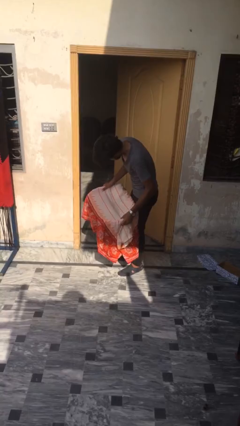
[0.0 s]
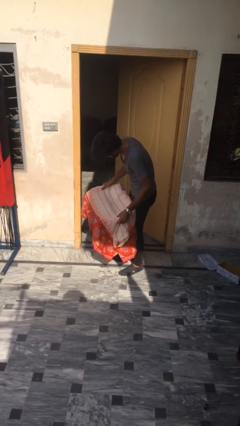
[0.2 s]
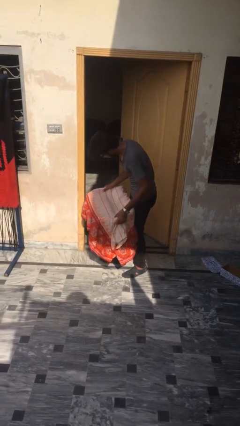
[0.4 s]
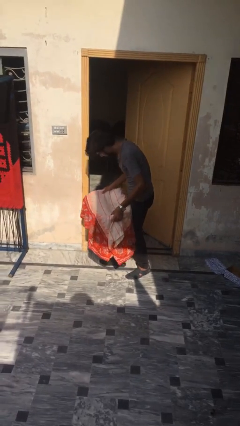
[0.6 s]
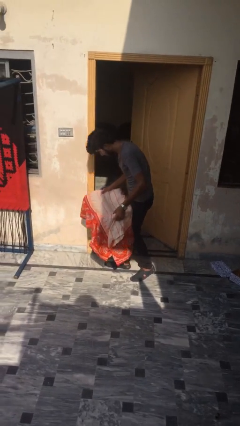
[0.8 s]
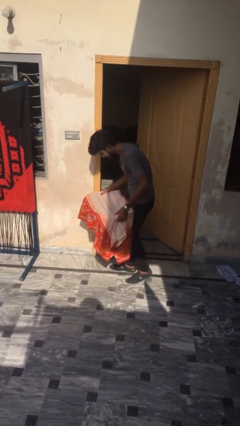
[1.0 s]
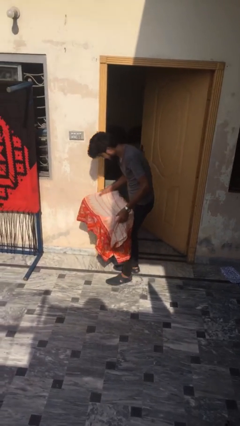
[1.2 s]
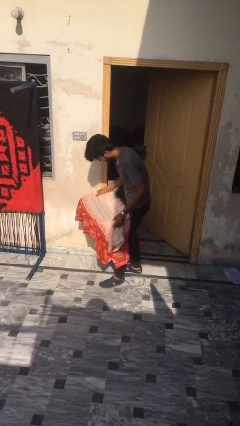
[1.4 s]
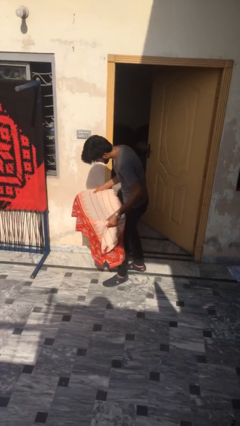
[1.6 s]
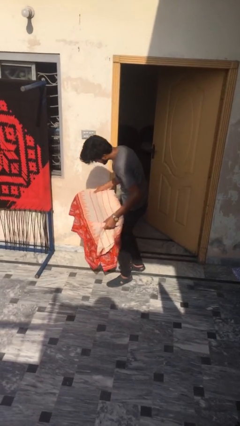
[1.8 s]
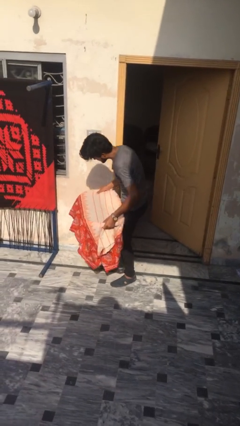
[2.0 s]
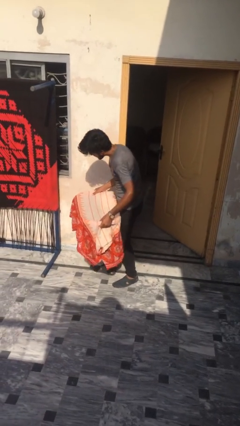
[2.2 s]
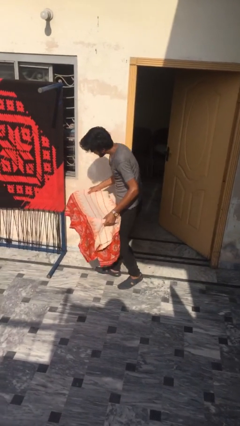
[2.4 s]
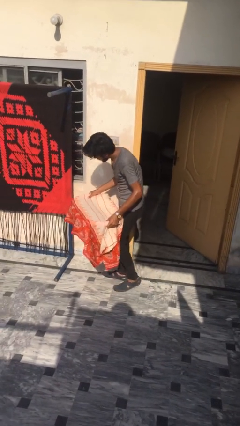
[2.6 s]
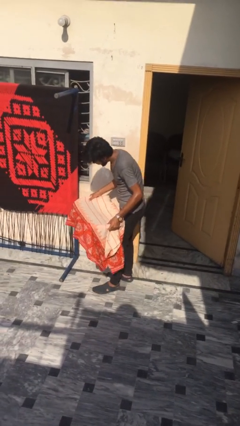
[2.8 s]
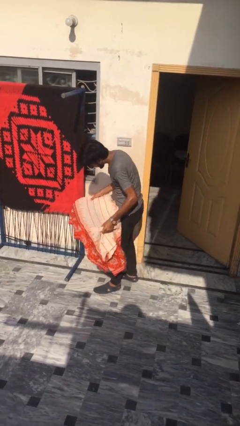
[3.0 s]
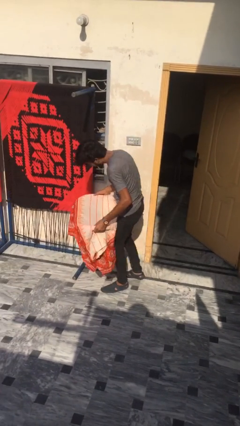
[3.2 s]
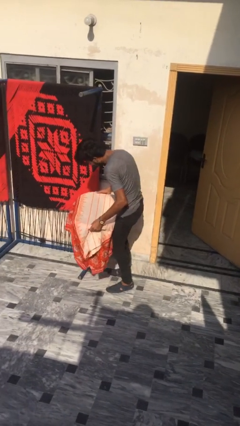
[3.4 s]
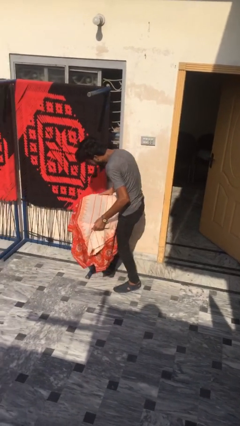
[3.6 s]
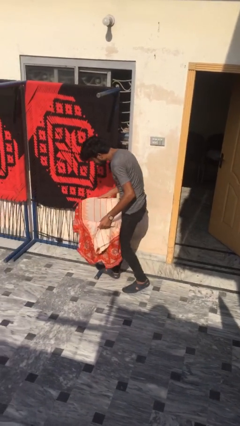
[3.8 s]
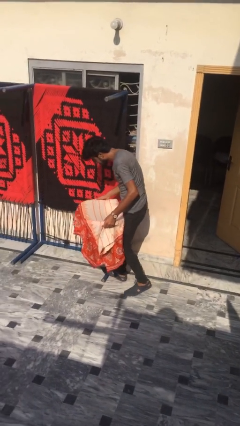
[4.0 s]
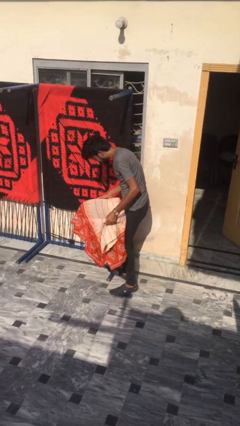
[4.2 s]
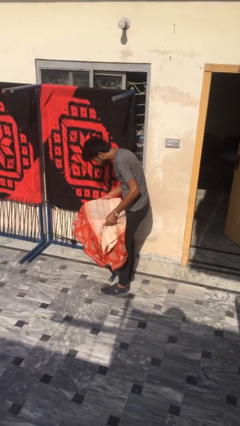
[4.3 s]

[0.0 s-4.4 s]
person carries heavy object

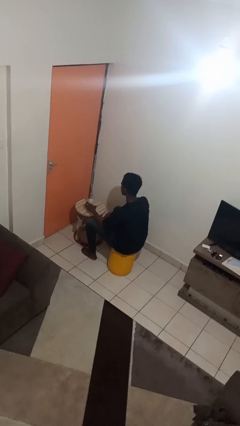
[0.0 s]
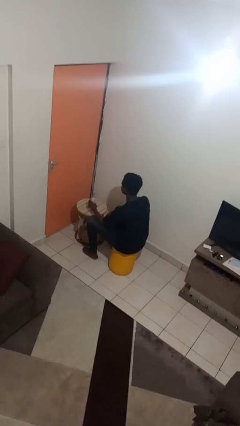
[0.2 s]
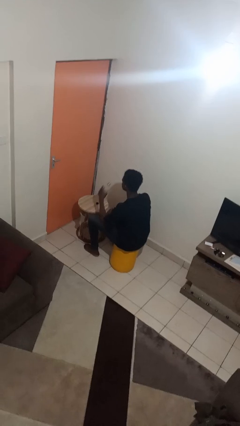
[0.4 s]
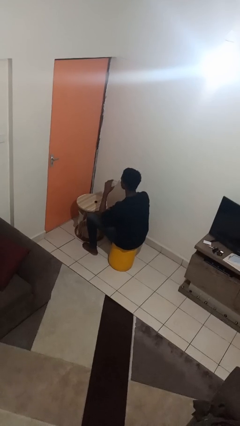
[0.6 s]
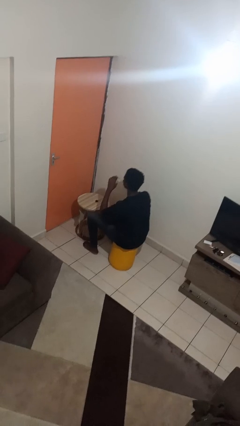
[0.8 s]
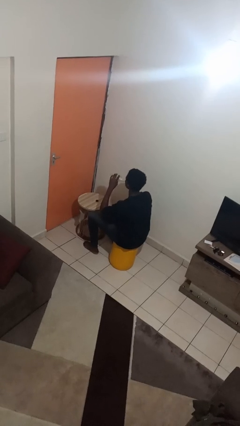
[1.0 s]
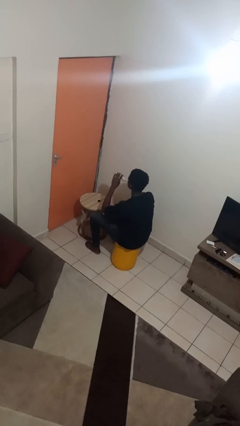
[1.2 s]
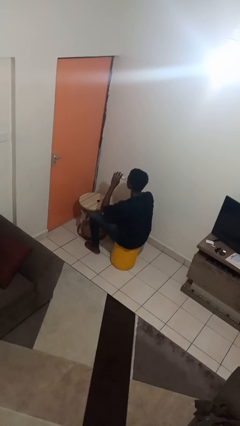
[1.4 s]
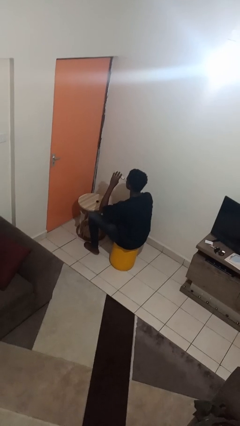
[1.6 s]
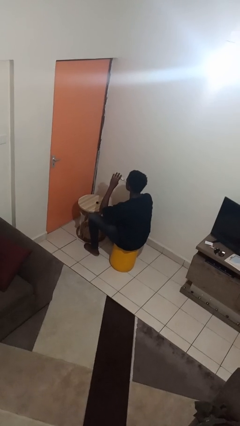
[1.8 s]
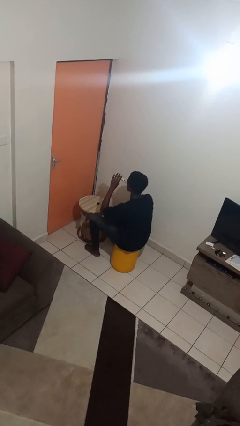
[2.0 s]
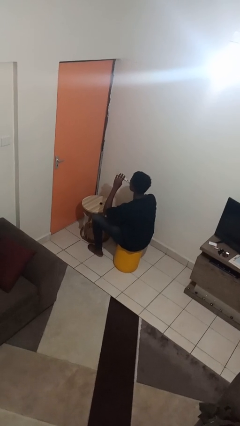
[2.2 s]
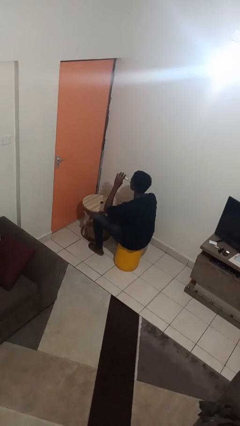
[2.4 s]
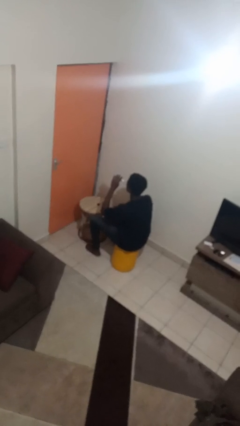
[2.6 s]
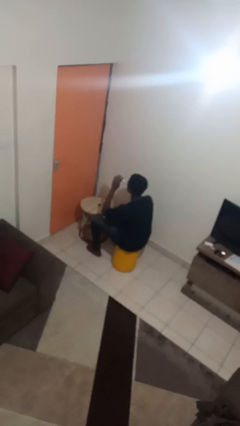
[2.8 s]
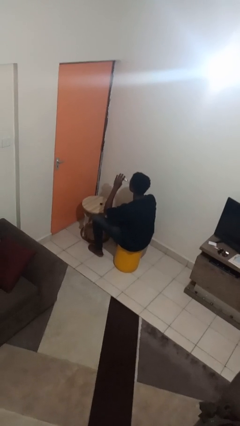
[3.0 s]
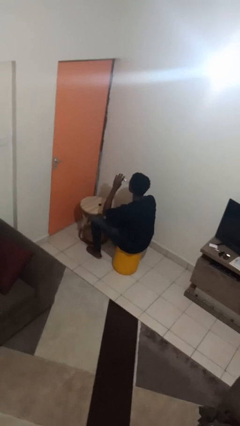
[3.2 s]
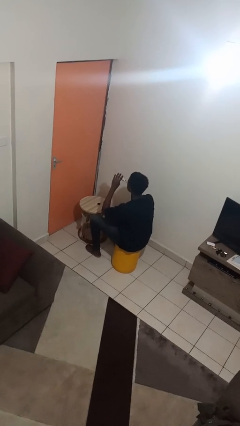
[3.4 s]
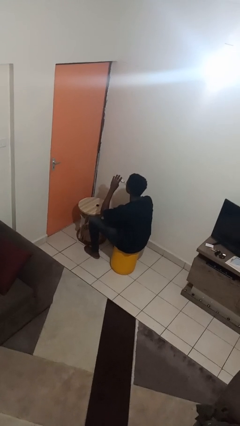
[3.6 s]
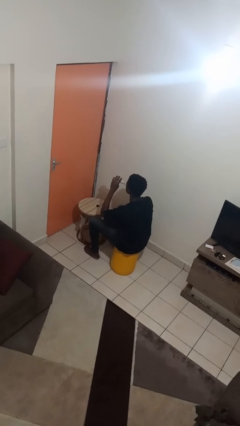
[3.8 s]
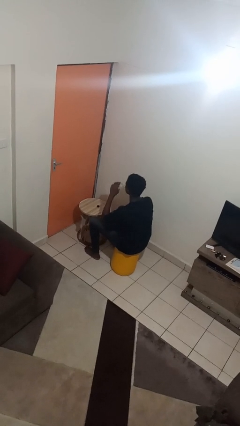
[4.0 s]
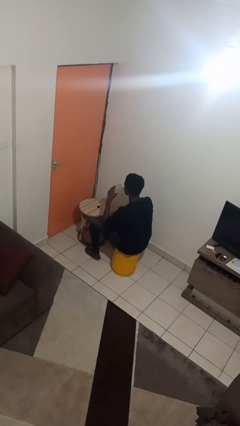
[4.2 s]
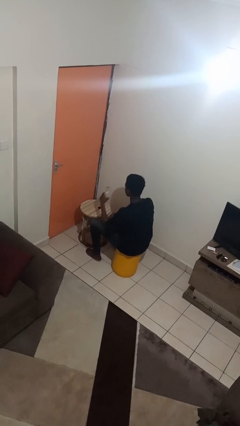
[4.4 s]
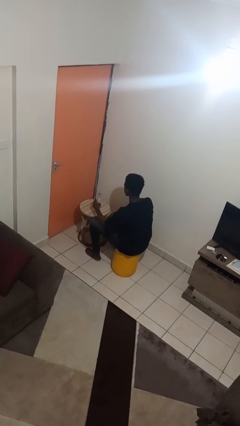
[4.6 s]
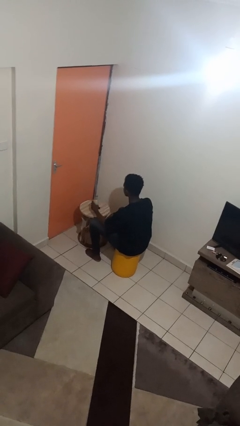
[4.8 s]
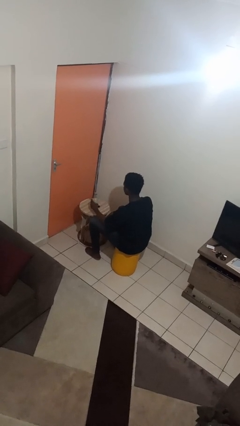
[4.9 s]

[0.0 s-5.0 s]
person drinks from bottle

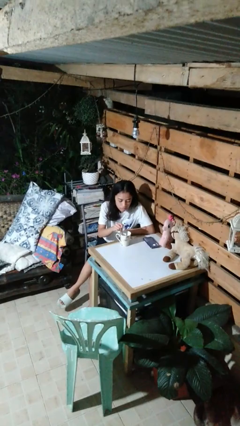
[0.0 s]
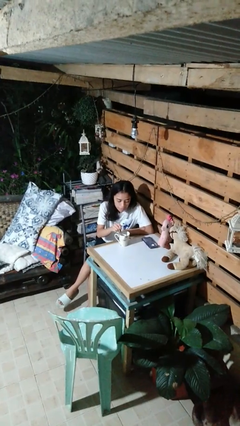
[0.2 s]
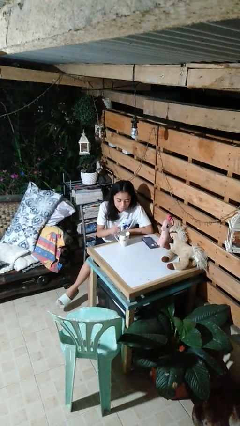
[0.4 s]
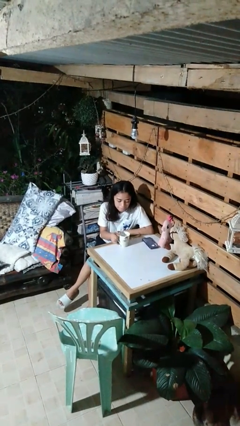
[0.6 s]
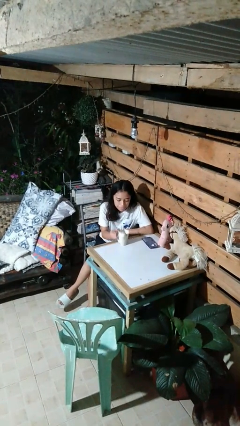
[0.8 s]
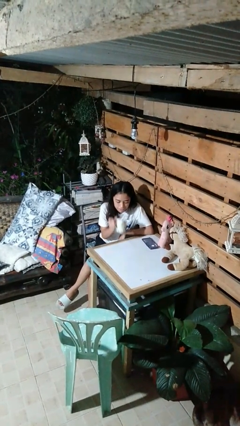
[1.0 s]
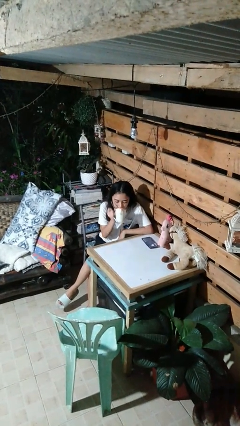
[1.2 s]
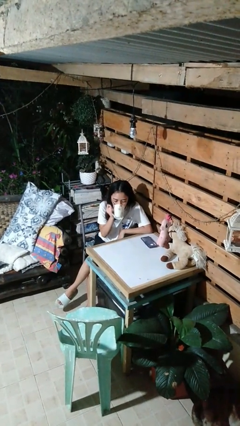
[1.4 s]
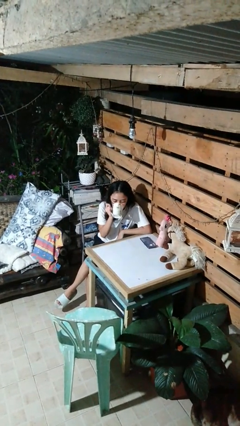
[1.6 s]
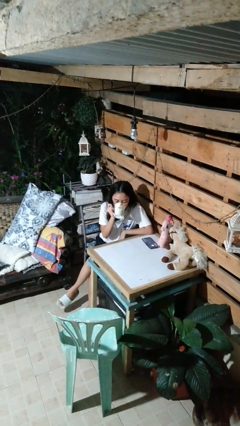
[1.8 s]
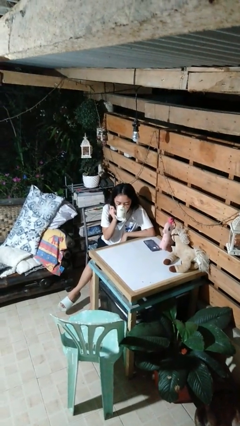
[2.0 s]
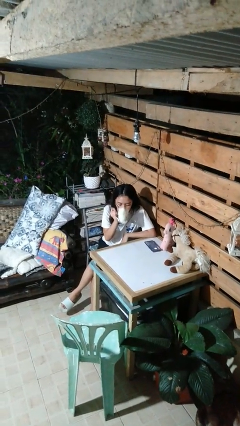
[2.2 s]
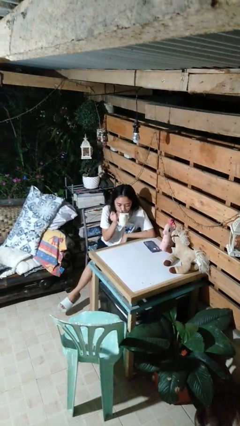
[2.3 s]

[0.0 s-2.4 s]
person drinks from mug

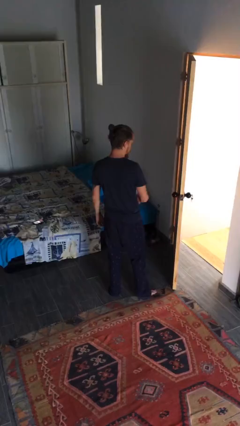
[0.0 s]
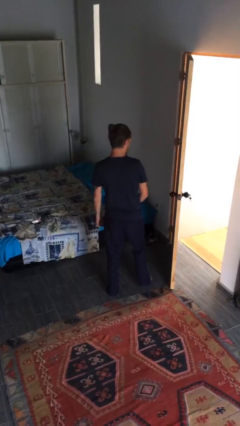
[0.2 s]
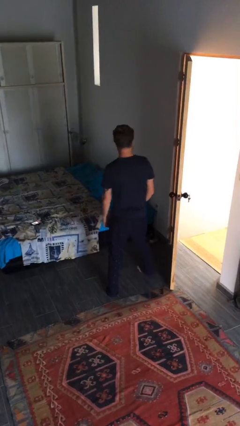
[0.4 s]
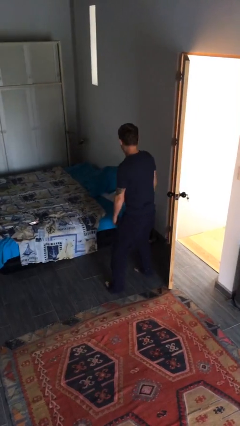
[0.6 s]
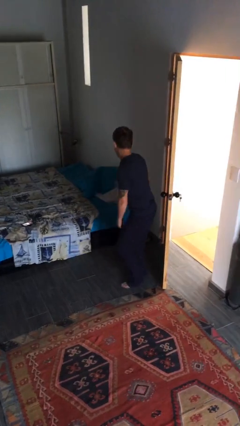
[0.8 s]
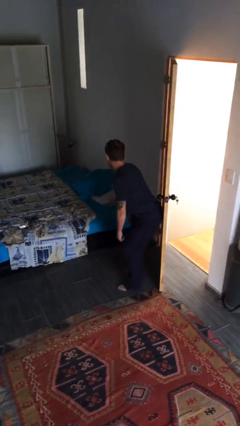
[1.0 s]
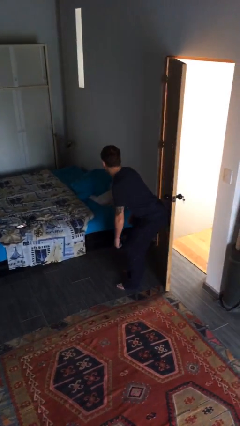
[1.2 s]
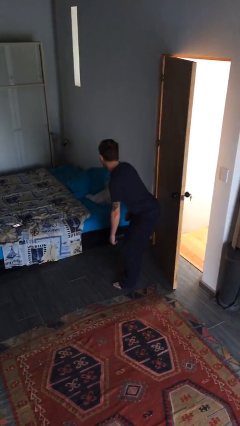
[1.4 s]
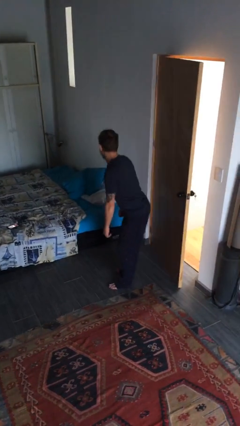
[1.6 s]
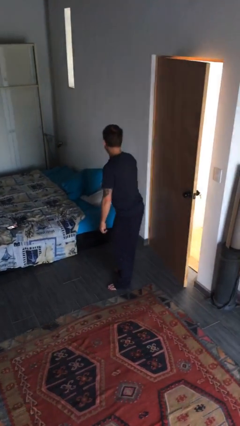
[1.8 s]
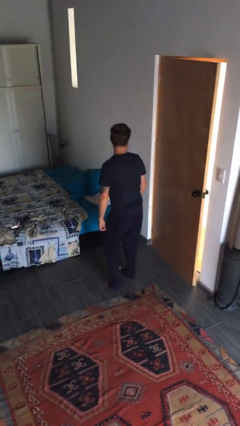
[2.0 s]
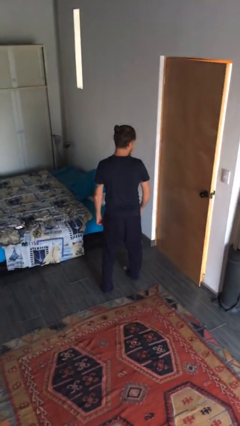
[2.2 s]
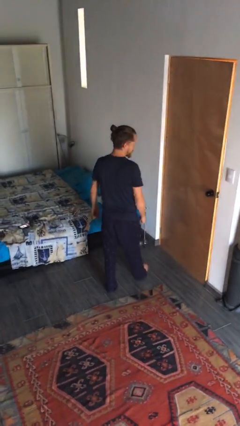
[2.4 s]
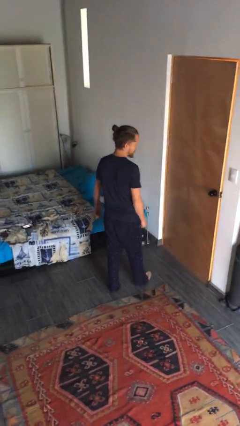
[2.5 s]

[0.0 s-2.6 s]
person closes door with hip

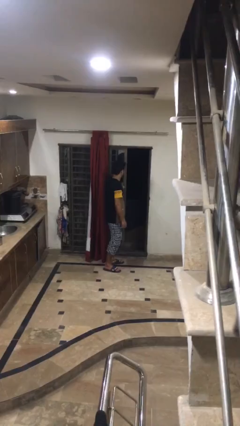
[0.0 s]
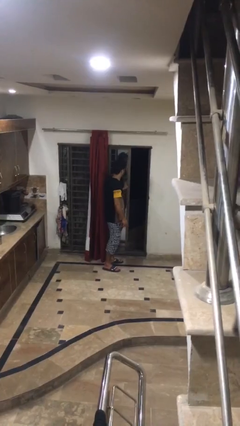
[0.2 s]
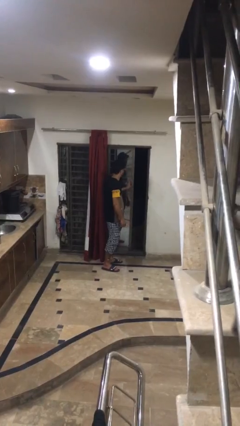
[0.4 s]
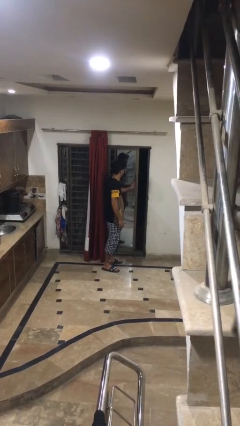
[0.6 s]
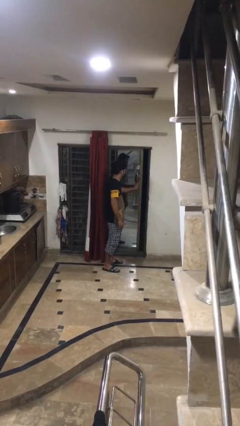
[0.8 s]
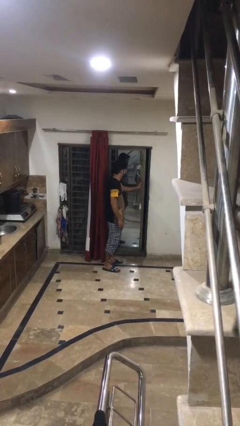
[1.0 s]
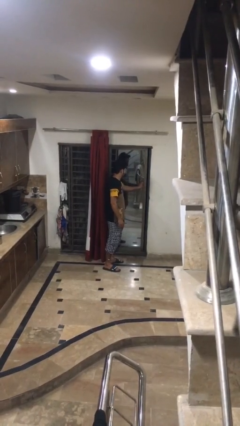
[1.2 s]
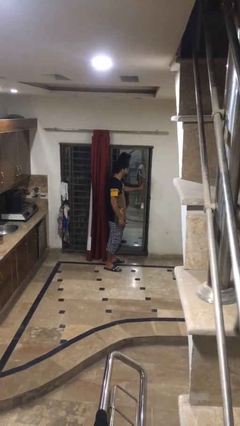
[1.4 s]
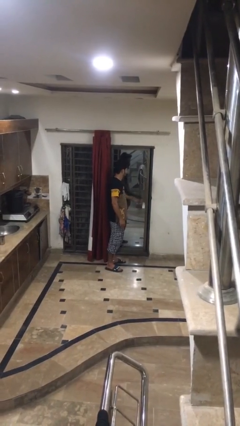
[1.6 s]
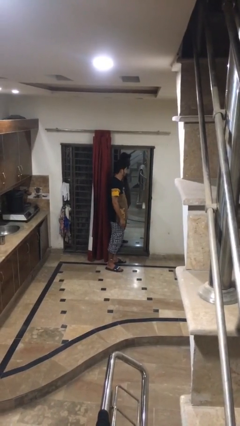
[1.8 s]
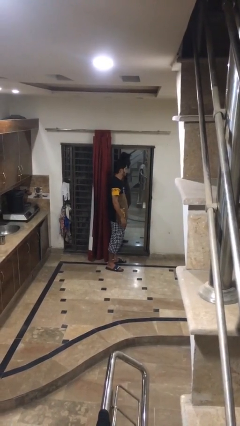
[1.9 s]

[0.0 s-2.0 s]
person closes home window

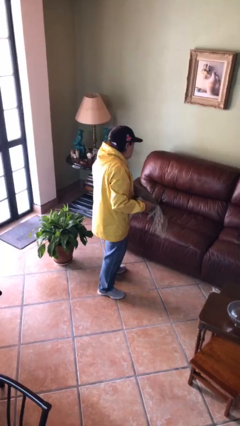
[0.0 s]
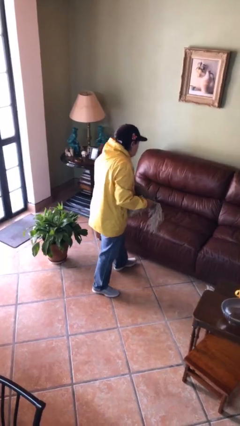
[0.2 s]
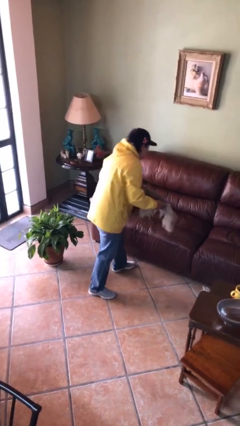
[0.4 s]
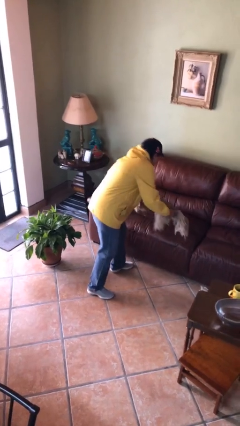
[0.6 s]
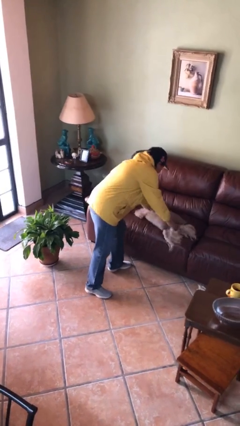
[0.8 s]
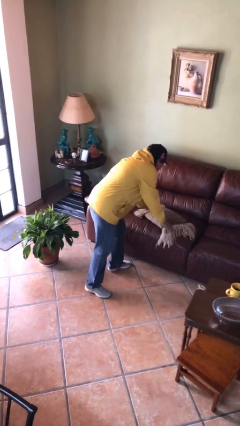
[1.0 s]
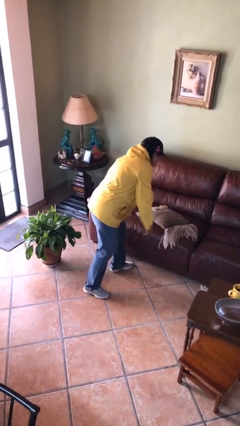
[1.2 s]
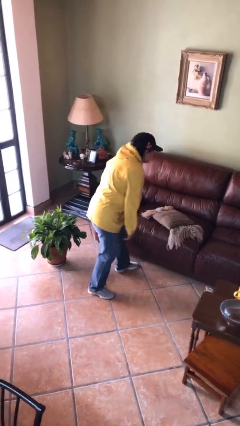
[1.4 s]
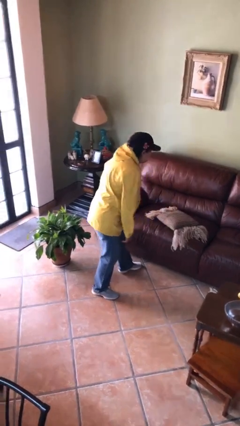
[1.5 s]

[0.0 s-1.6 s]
person puts down object on couch
